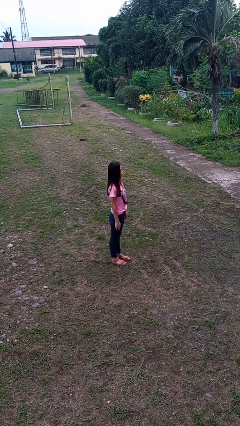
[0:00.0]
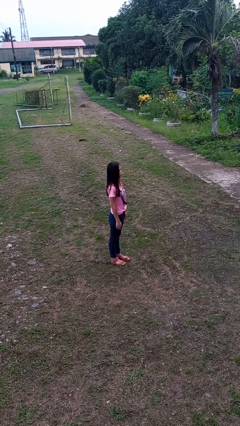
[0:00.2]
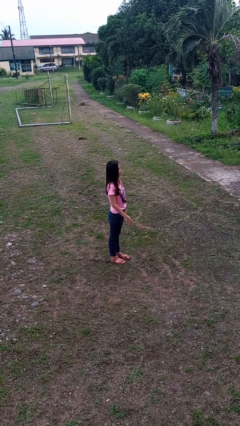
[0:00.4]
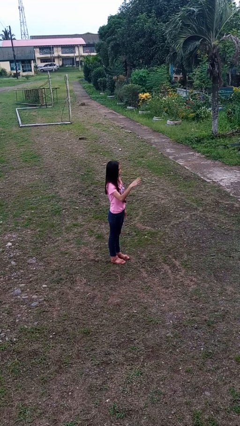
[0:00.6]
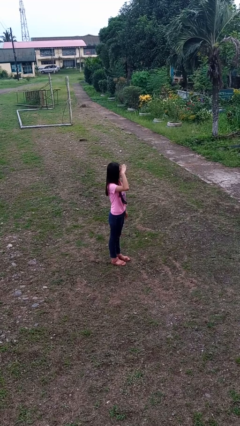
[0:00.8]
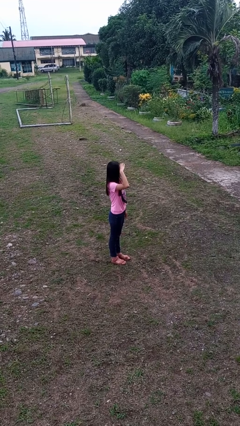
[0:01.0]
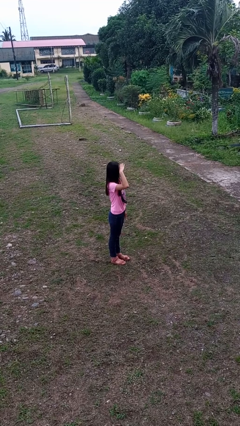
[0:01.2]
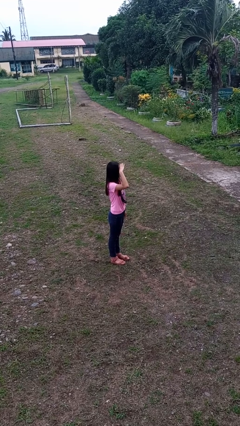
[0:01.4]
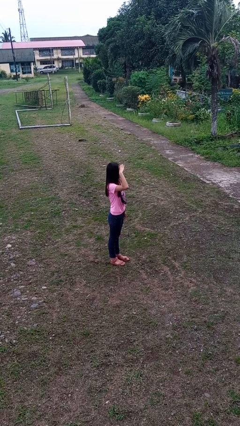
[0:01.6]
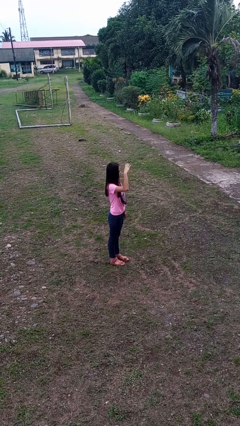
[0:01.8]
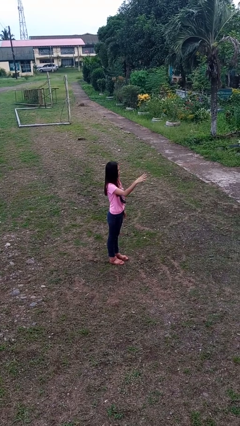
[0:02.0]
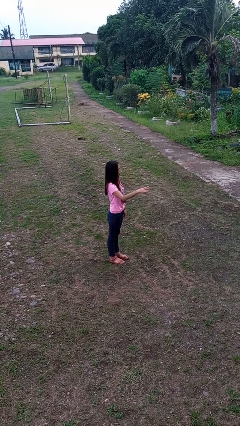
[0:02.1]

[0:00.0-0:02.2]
person salutes

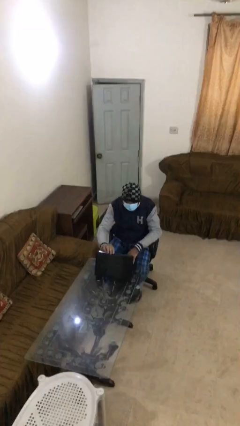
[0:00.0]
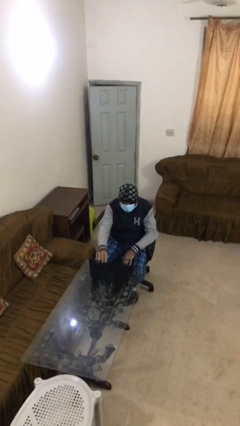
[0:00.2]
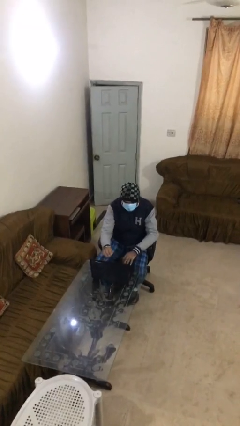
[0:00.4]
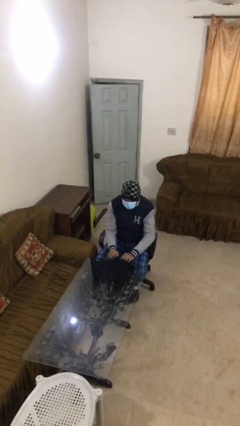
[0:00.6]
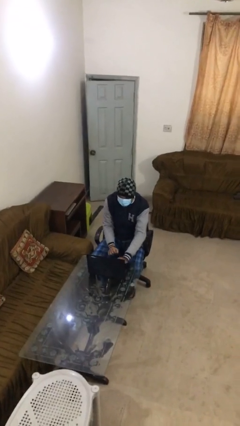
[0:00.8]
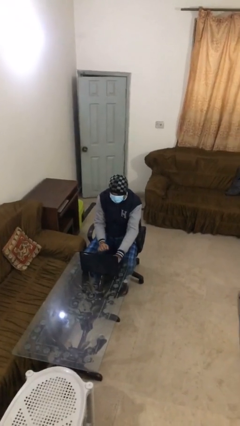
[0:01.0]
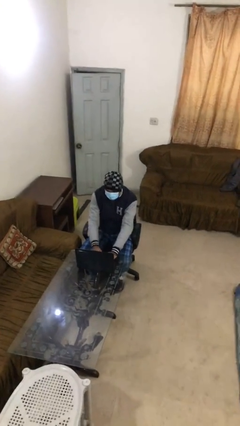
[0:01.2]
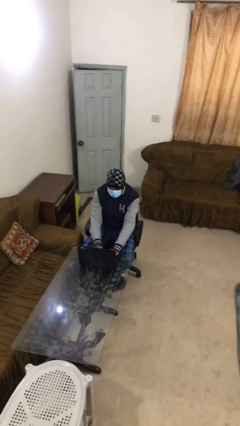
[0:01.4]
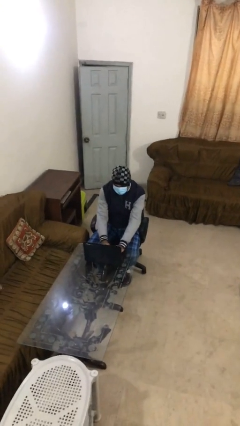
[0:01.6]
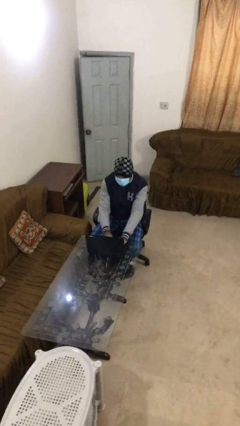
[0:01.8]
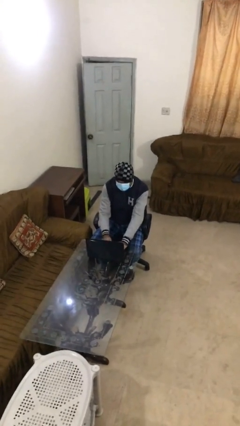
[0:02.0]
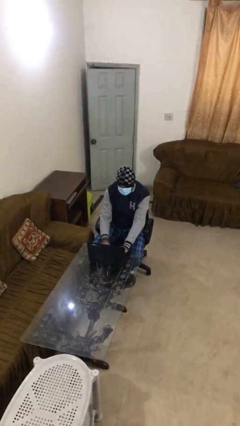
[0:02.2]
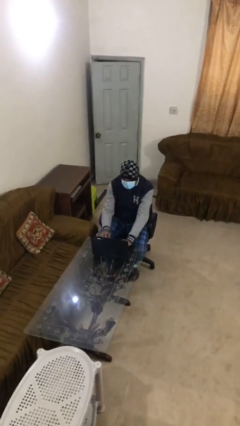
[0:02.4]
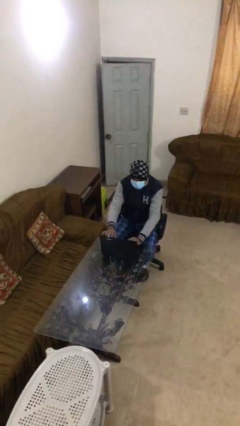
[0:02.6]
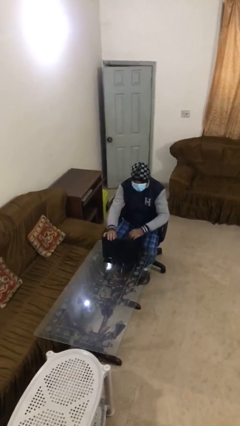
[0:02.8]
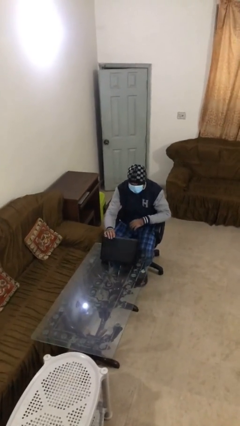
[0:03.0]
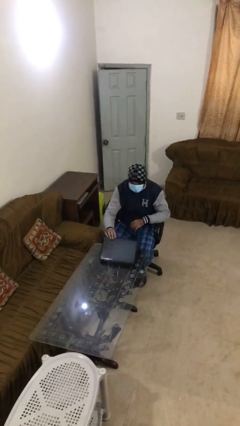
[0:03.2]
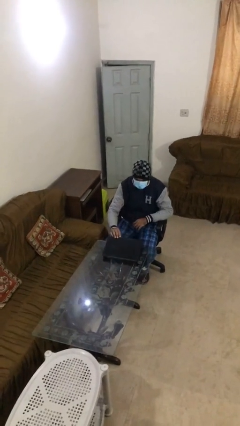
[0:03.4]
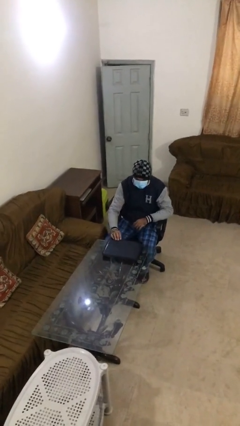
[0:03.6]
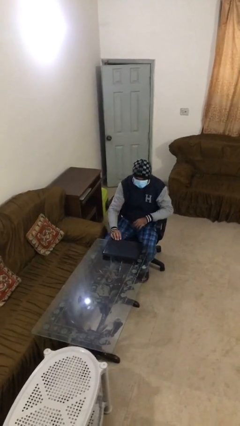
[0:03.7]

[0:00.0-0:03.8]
person interacts with laptop

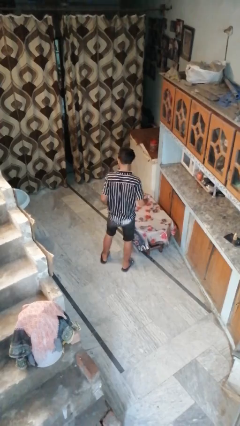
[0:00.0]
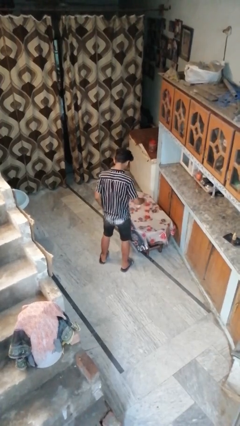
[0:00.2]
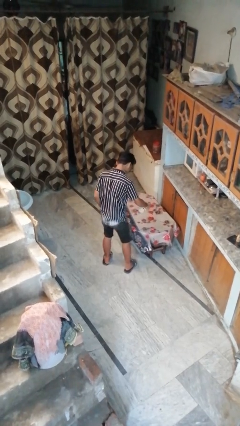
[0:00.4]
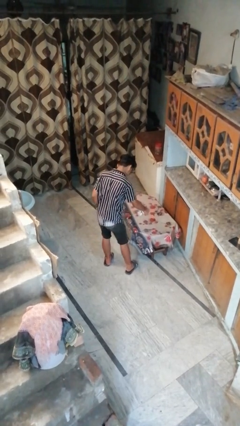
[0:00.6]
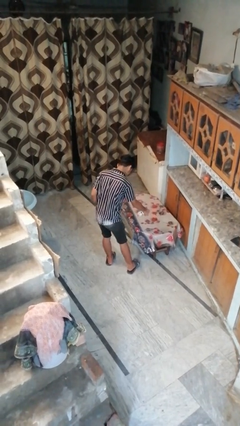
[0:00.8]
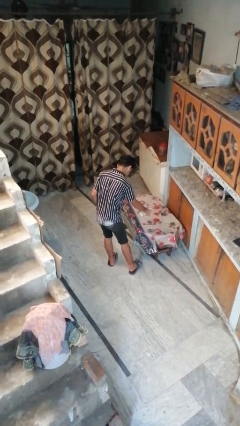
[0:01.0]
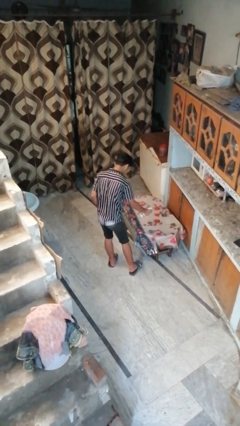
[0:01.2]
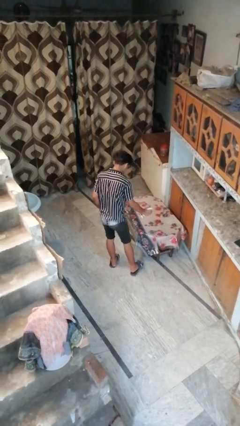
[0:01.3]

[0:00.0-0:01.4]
person sprays from bottle

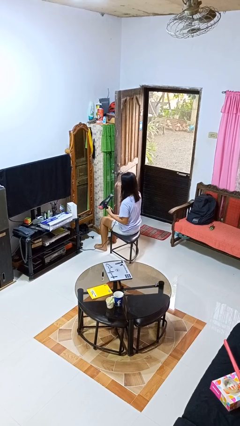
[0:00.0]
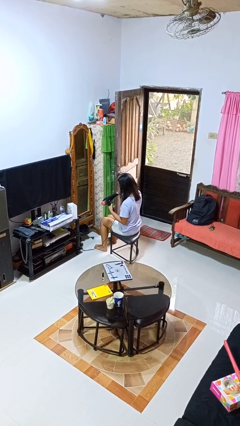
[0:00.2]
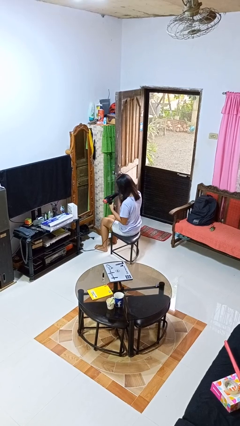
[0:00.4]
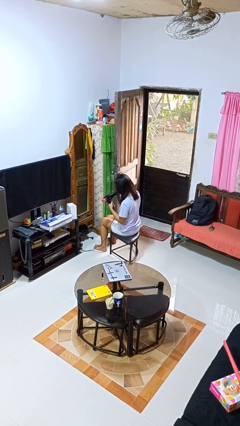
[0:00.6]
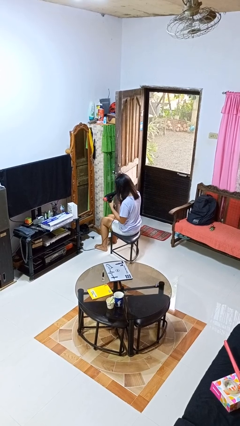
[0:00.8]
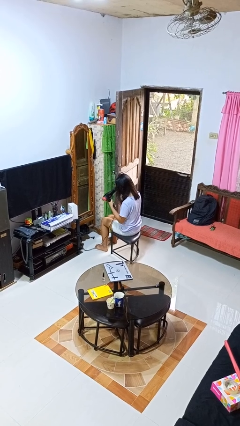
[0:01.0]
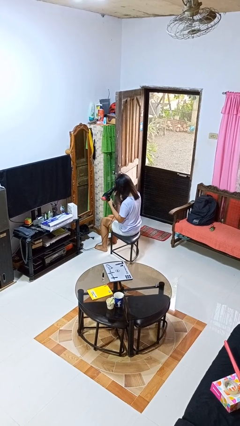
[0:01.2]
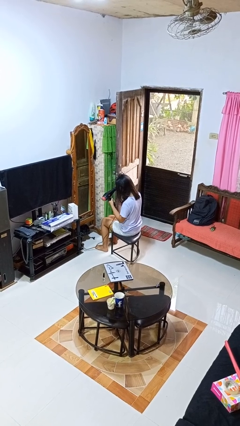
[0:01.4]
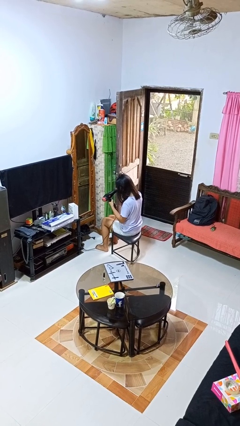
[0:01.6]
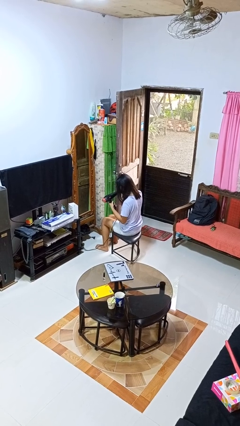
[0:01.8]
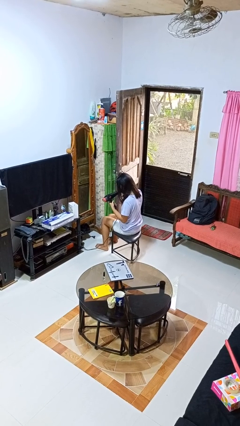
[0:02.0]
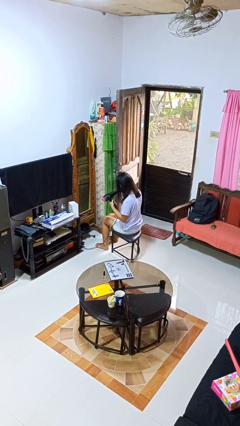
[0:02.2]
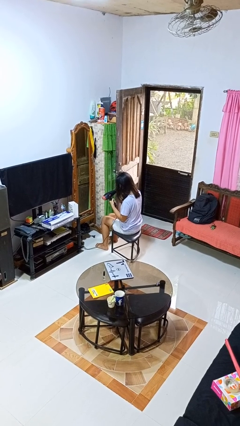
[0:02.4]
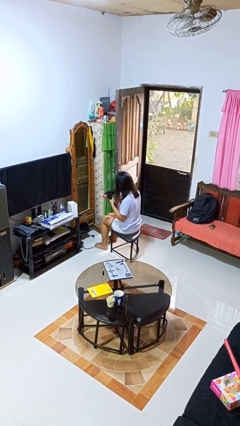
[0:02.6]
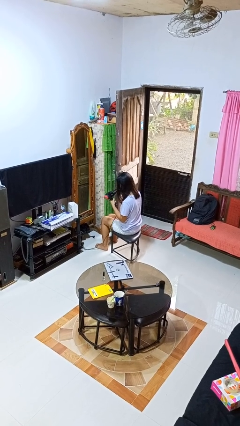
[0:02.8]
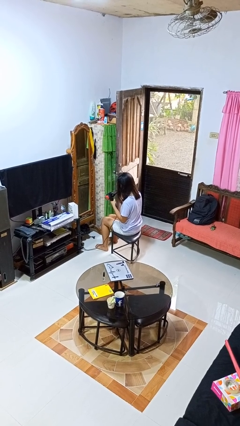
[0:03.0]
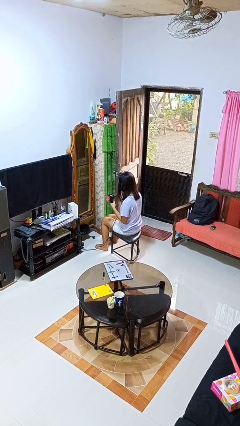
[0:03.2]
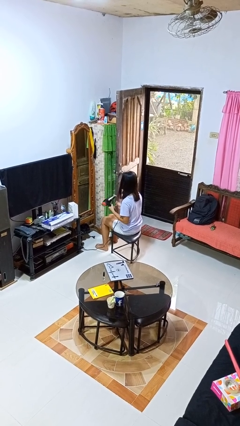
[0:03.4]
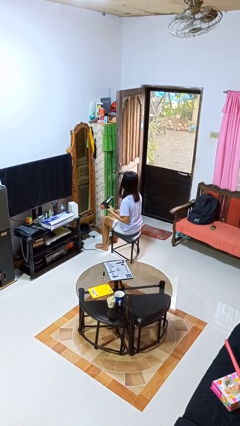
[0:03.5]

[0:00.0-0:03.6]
person dries hair with hairdryer

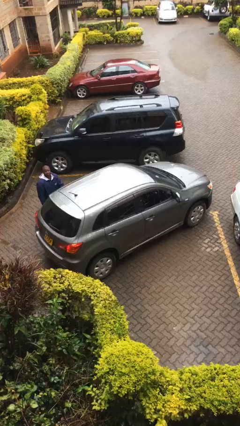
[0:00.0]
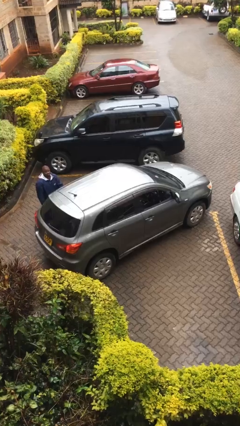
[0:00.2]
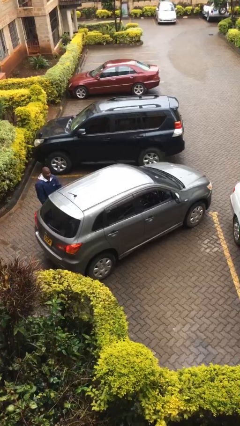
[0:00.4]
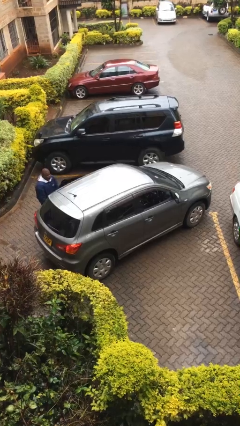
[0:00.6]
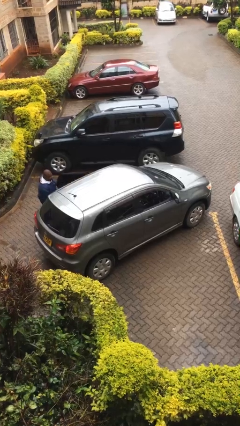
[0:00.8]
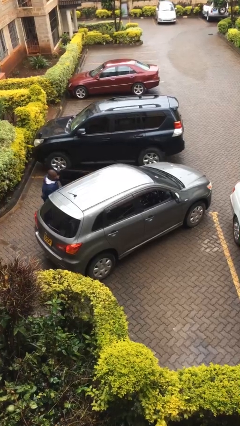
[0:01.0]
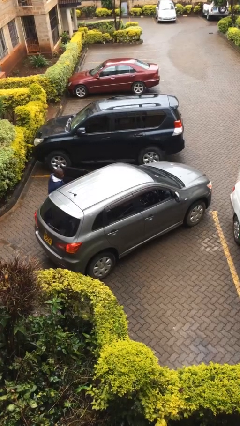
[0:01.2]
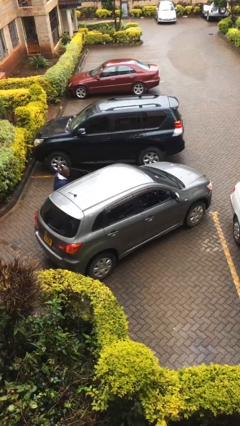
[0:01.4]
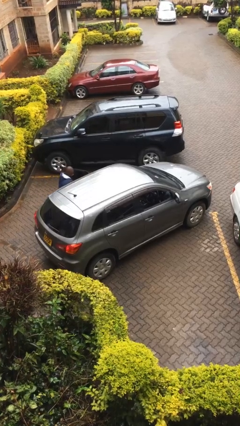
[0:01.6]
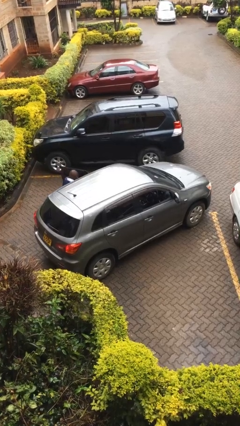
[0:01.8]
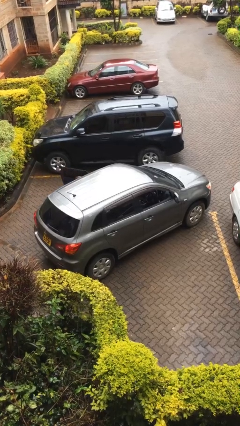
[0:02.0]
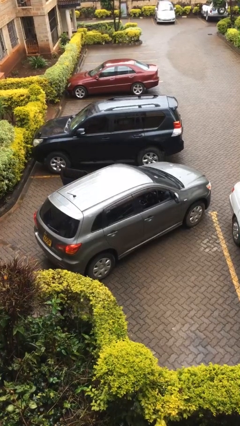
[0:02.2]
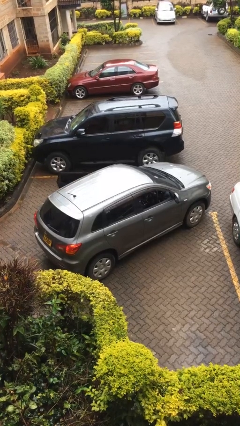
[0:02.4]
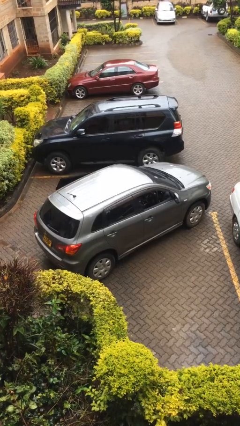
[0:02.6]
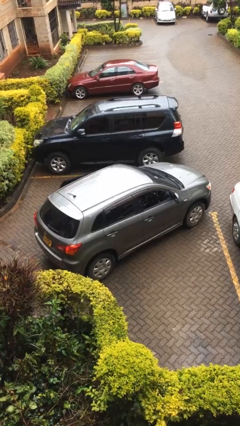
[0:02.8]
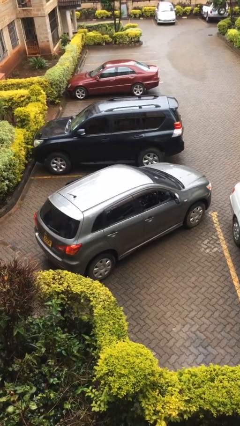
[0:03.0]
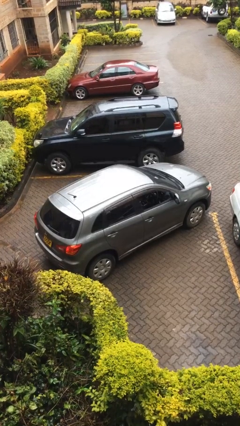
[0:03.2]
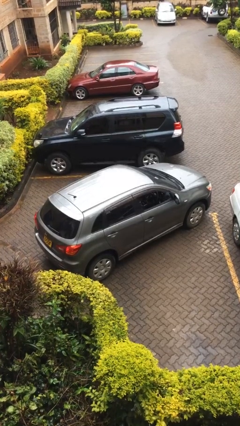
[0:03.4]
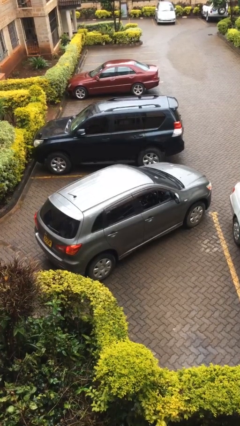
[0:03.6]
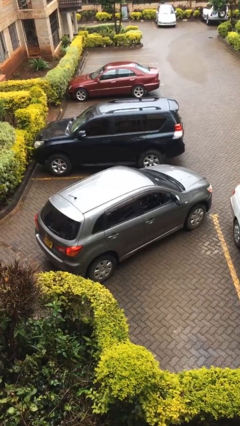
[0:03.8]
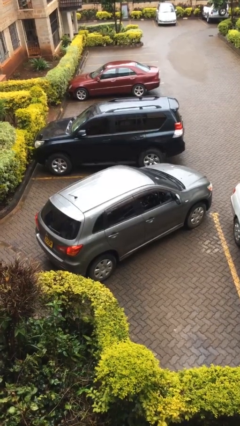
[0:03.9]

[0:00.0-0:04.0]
car picks up person

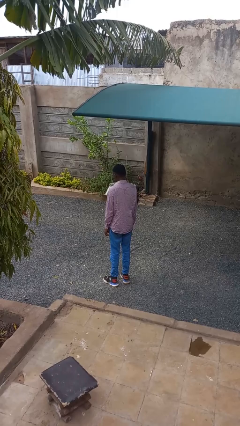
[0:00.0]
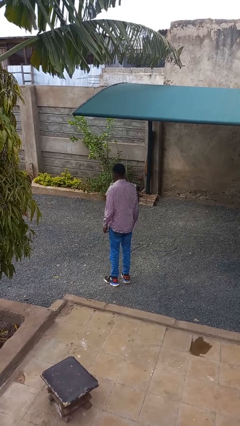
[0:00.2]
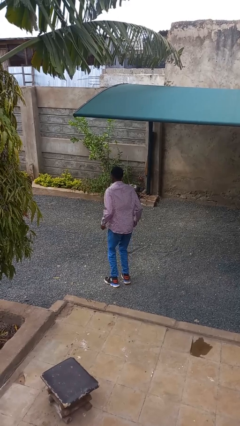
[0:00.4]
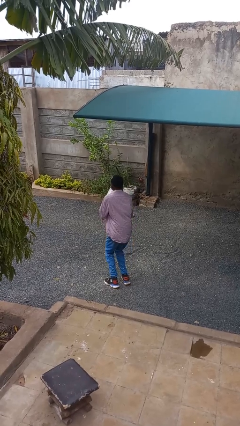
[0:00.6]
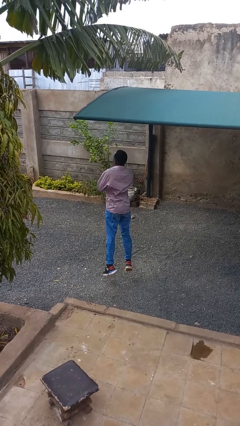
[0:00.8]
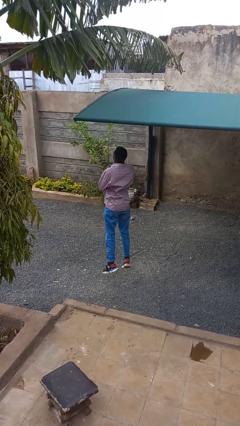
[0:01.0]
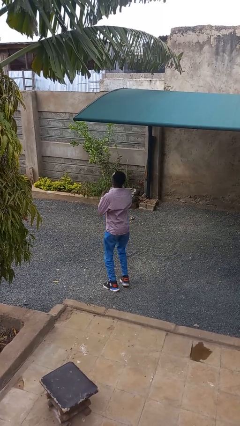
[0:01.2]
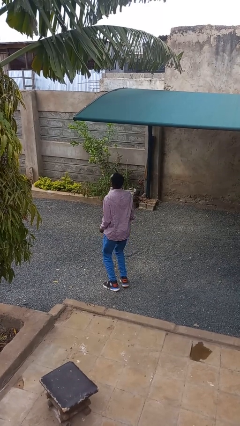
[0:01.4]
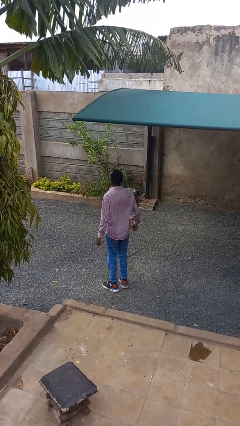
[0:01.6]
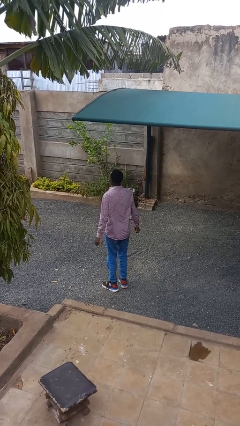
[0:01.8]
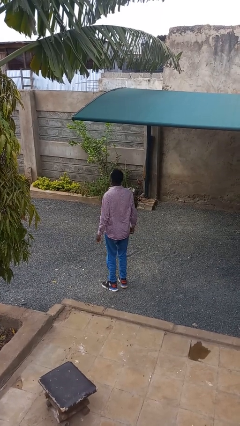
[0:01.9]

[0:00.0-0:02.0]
person jumps

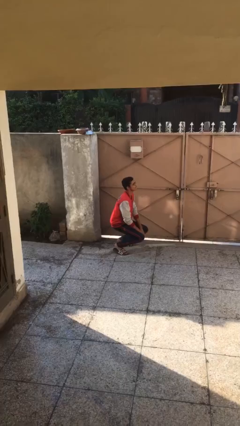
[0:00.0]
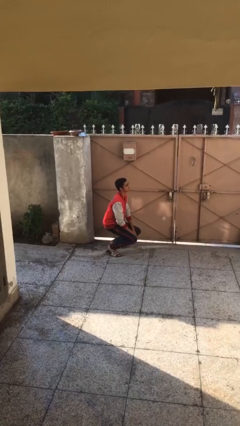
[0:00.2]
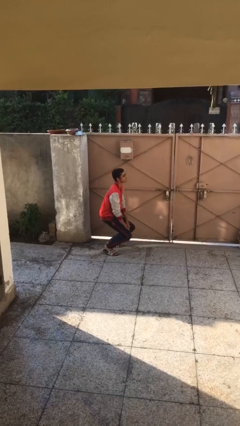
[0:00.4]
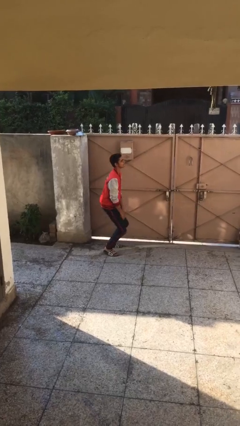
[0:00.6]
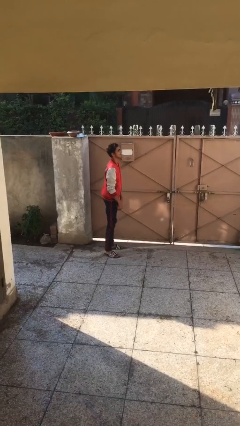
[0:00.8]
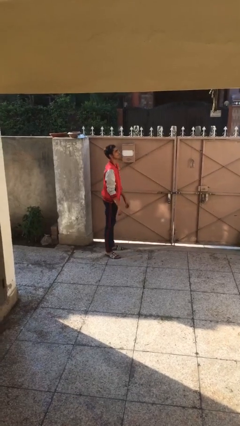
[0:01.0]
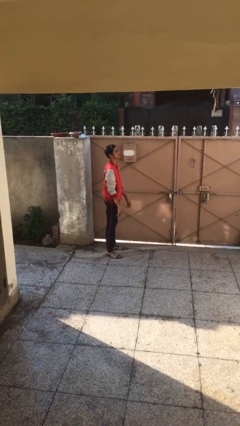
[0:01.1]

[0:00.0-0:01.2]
person stands up
